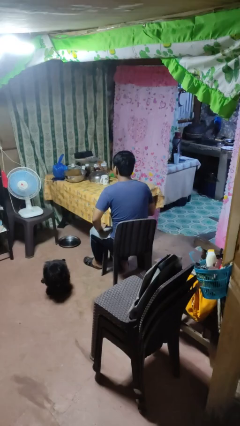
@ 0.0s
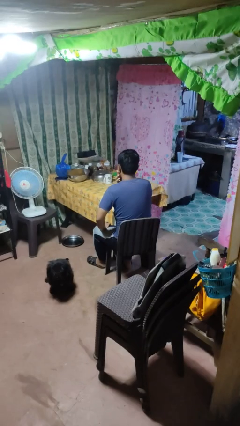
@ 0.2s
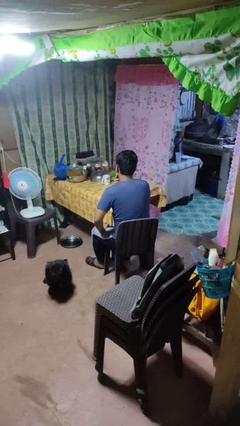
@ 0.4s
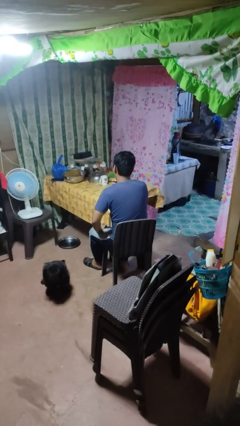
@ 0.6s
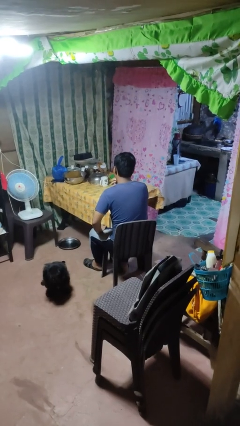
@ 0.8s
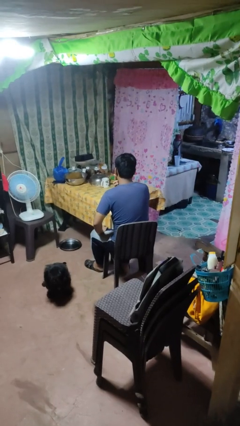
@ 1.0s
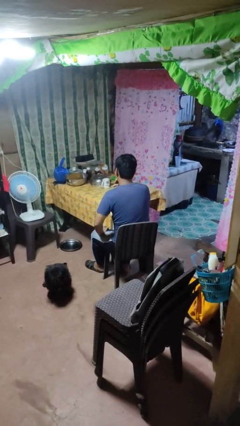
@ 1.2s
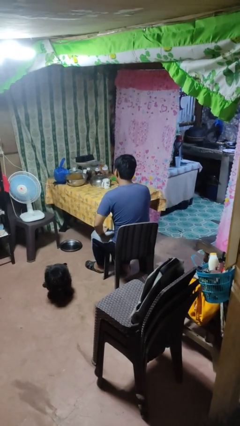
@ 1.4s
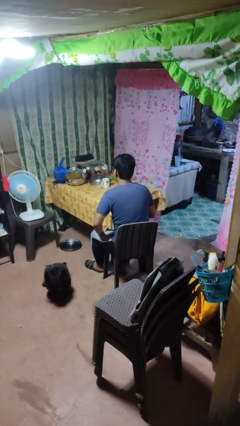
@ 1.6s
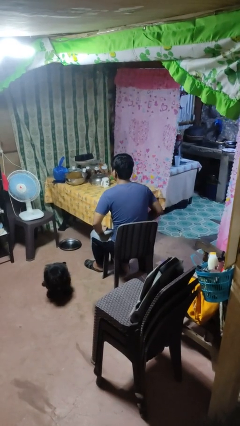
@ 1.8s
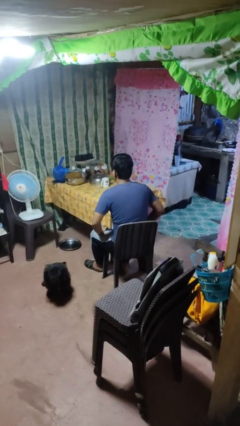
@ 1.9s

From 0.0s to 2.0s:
person strokes chin

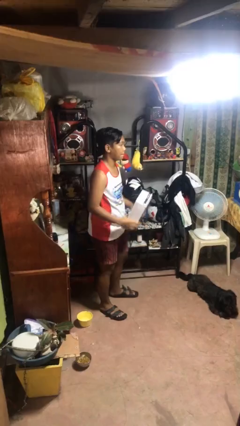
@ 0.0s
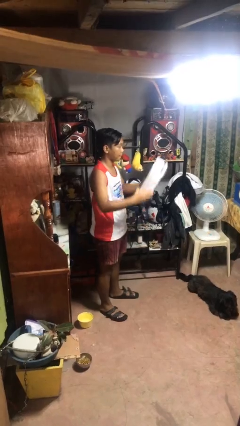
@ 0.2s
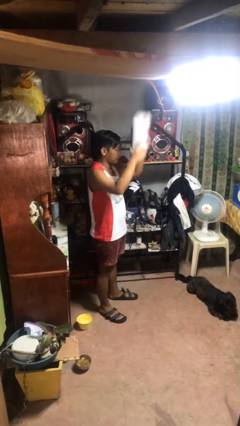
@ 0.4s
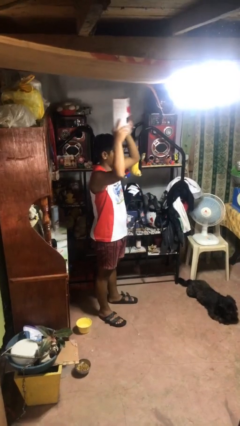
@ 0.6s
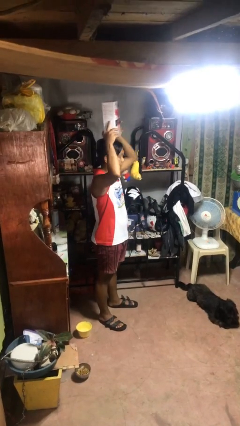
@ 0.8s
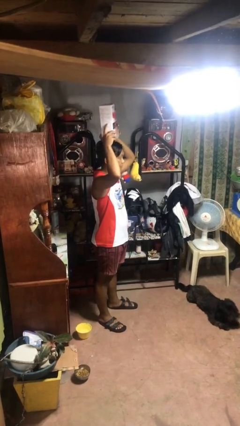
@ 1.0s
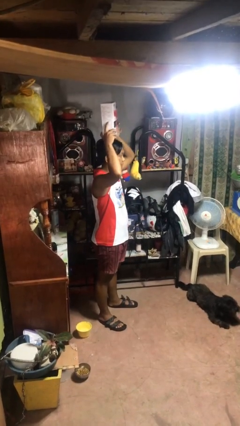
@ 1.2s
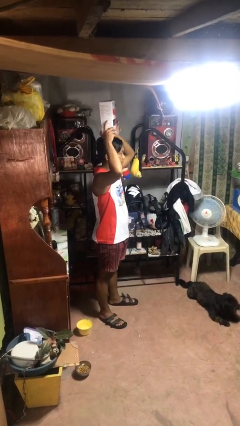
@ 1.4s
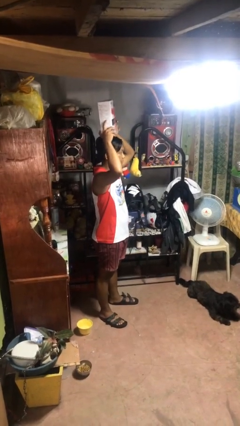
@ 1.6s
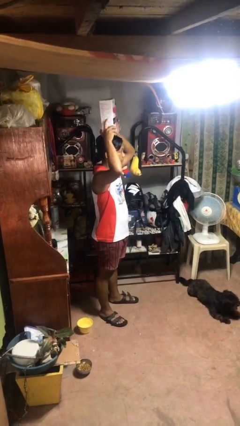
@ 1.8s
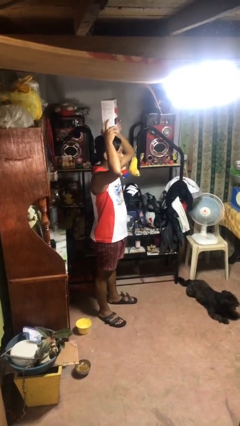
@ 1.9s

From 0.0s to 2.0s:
person holds object above head

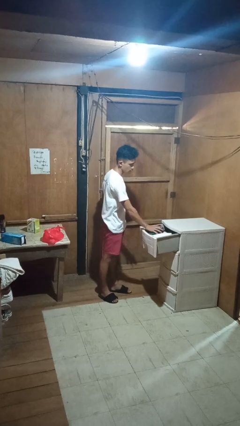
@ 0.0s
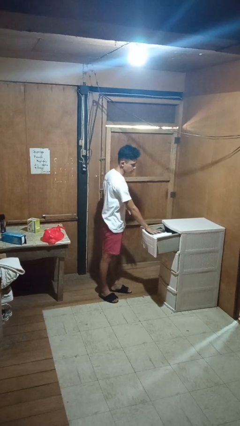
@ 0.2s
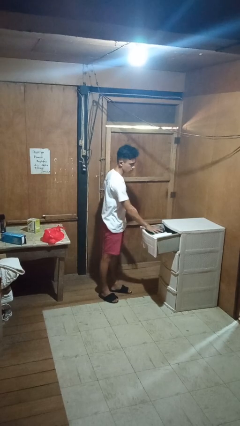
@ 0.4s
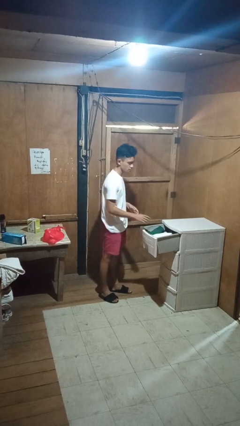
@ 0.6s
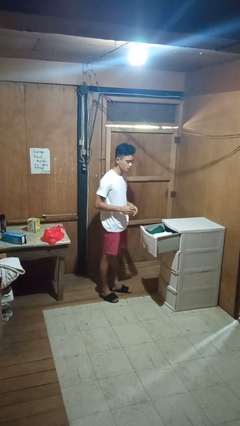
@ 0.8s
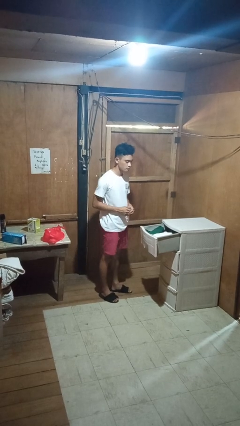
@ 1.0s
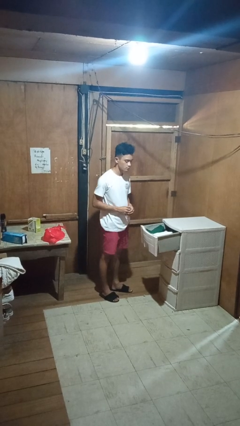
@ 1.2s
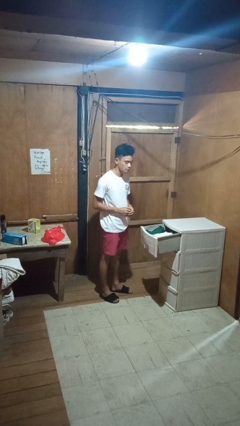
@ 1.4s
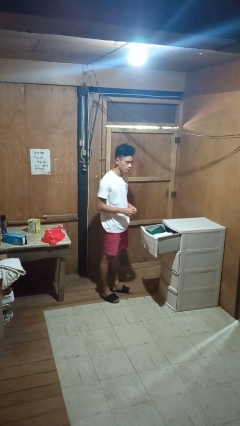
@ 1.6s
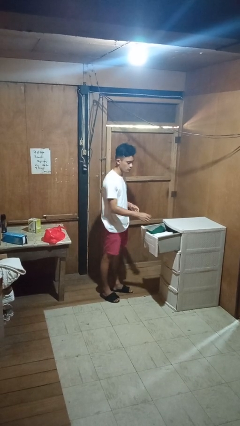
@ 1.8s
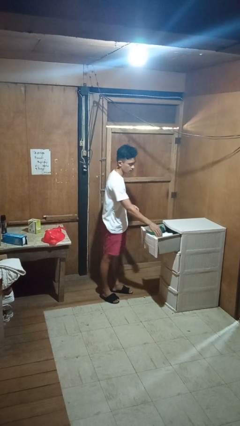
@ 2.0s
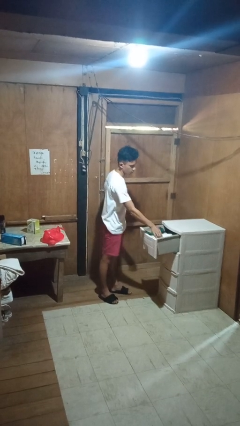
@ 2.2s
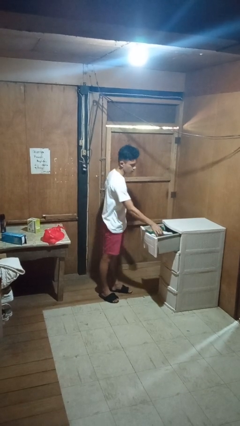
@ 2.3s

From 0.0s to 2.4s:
person puts clothes into dresser

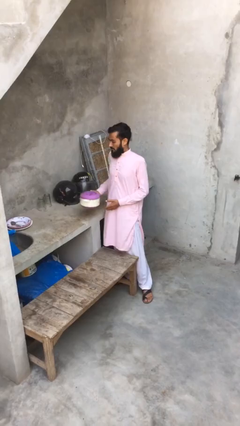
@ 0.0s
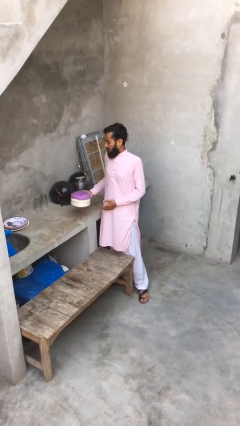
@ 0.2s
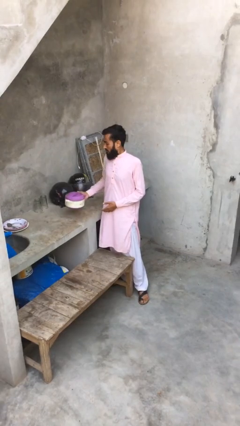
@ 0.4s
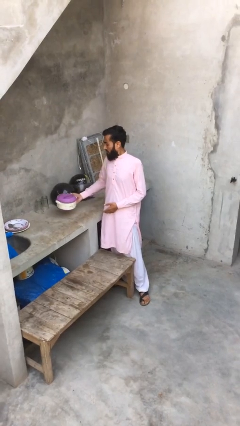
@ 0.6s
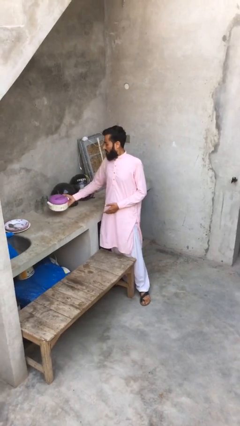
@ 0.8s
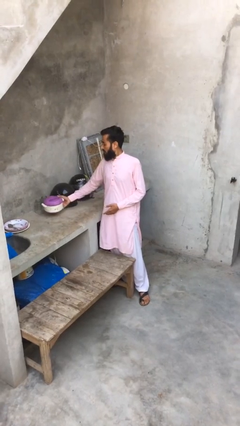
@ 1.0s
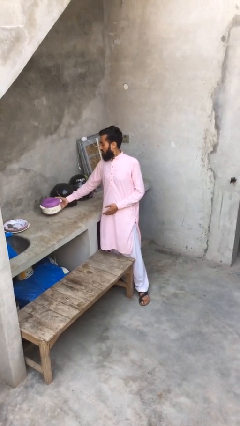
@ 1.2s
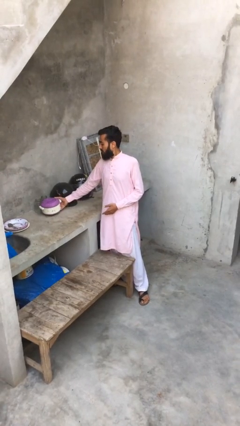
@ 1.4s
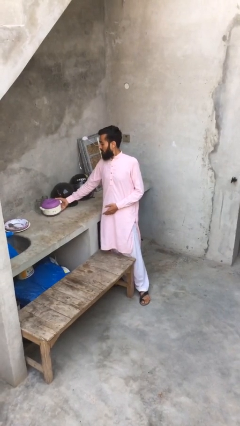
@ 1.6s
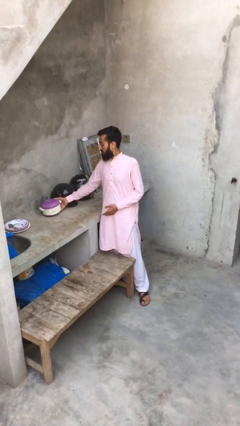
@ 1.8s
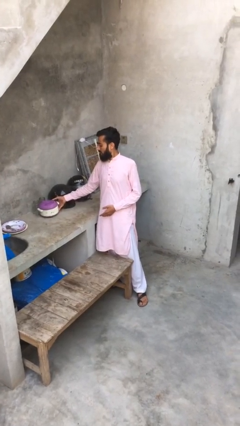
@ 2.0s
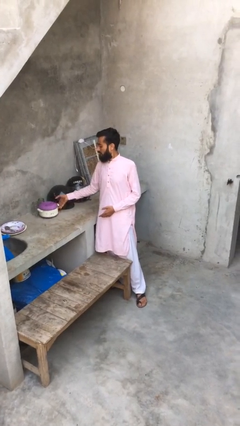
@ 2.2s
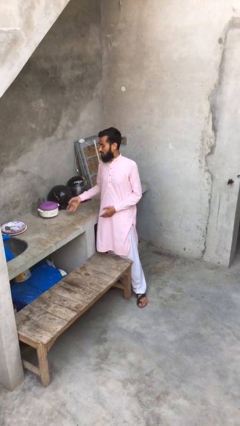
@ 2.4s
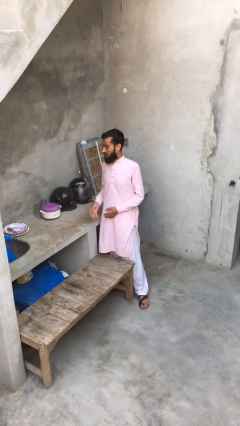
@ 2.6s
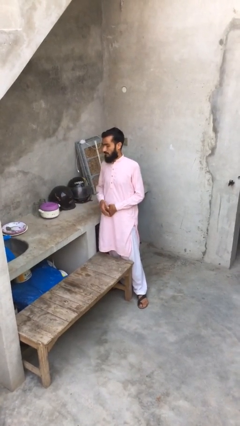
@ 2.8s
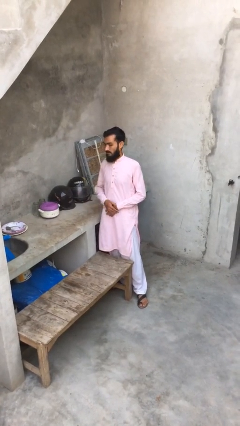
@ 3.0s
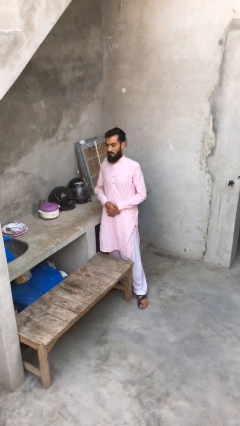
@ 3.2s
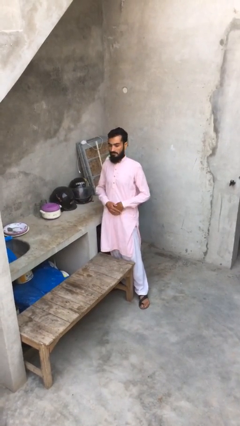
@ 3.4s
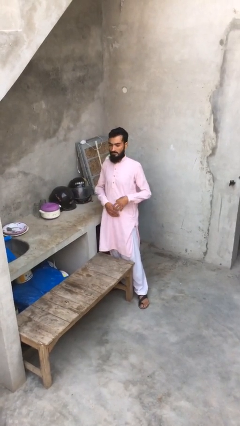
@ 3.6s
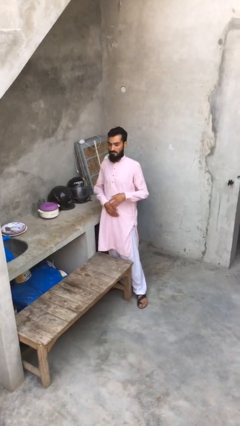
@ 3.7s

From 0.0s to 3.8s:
person puts down object on shelf

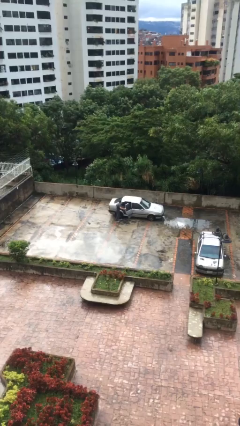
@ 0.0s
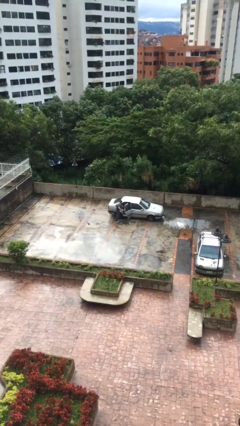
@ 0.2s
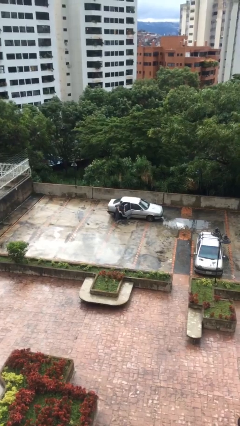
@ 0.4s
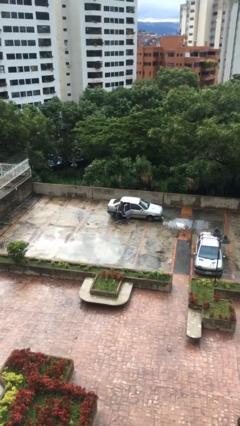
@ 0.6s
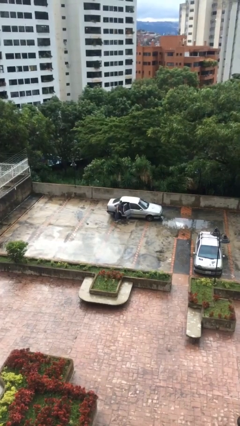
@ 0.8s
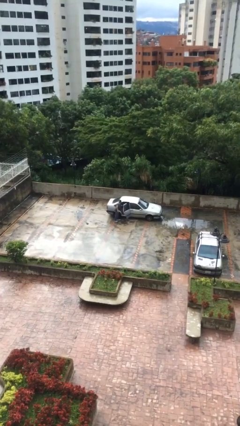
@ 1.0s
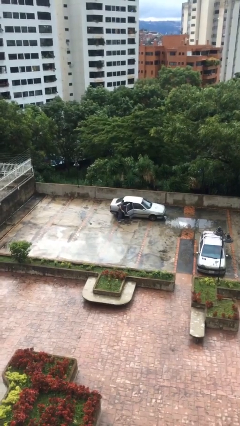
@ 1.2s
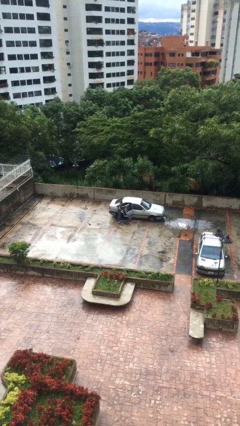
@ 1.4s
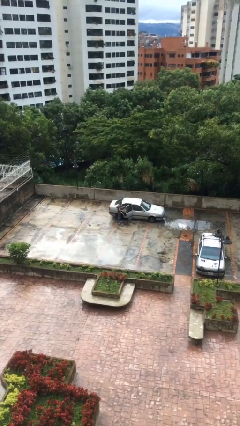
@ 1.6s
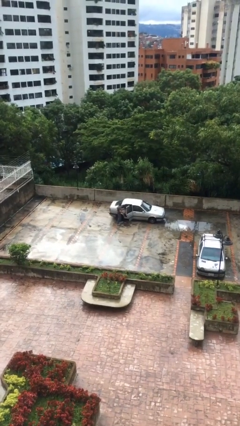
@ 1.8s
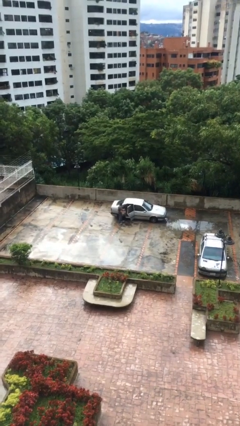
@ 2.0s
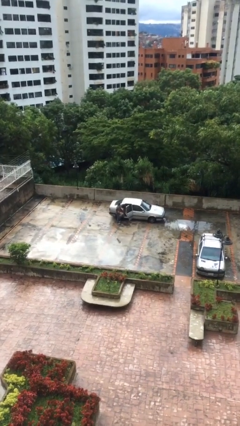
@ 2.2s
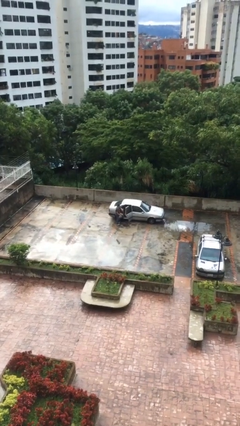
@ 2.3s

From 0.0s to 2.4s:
person unloads car

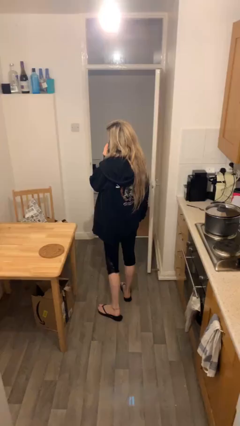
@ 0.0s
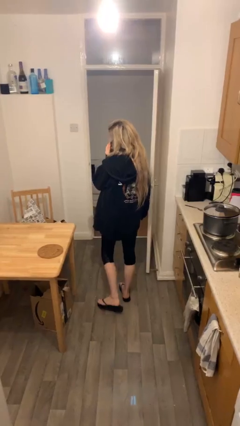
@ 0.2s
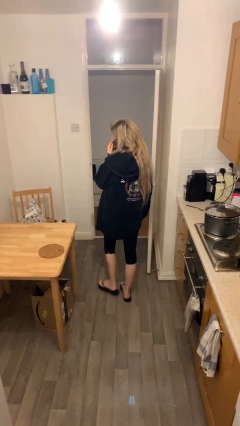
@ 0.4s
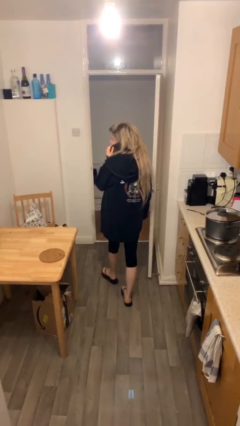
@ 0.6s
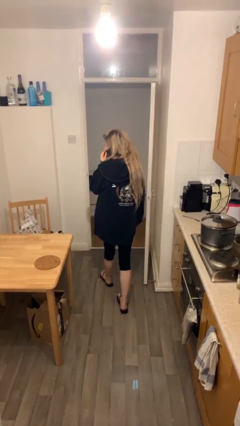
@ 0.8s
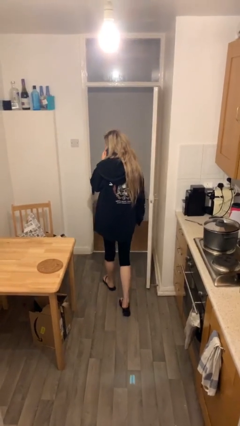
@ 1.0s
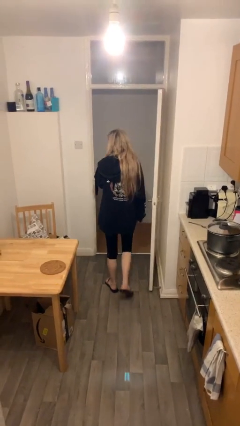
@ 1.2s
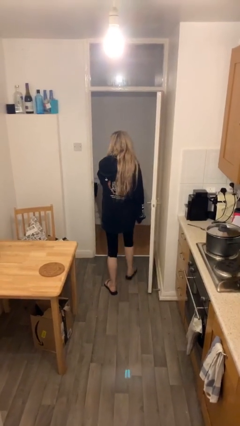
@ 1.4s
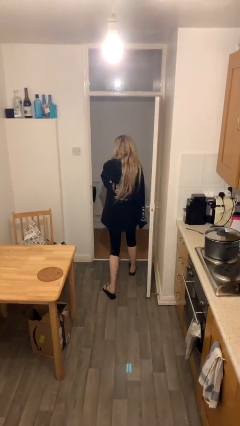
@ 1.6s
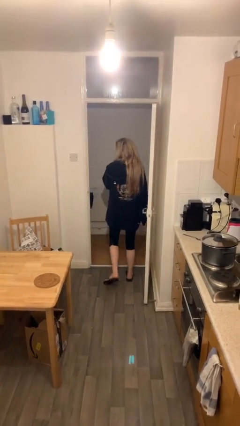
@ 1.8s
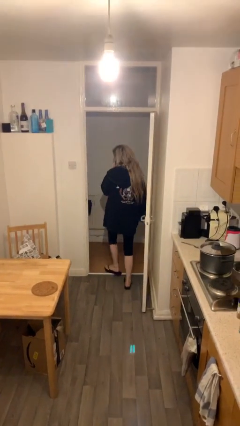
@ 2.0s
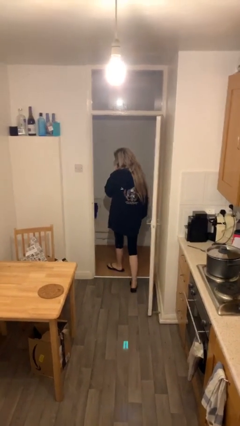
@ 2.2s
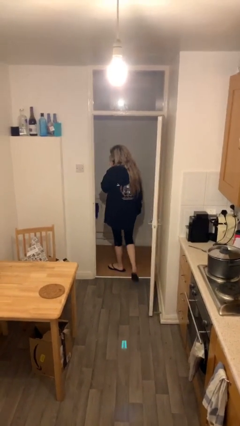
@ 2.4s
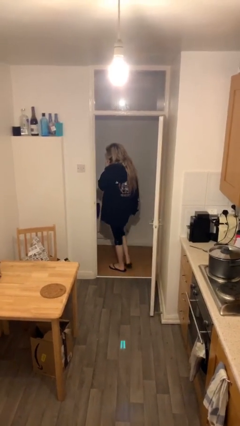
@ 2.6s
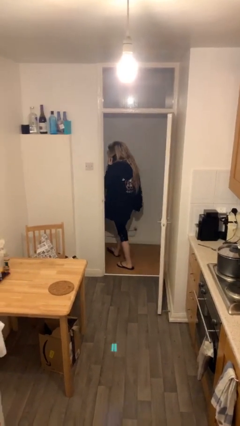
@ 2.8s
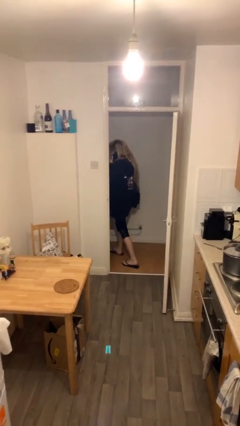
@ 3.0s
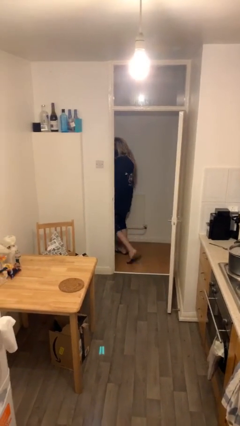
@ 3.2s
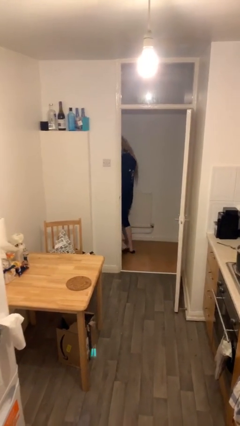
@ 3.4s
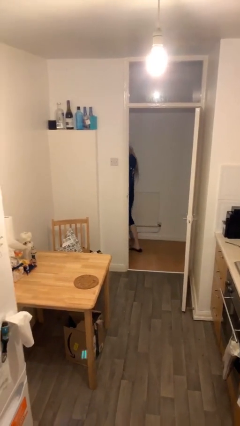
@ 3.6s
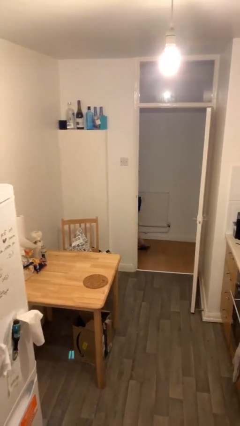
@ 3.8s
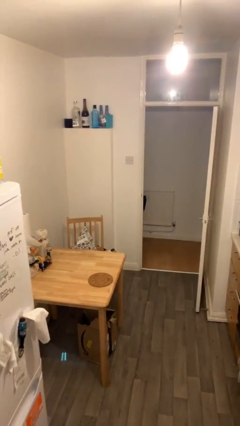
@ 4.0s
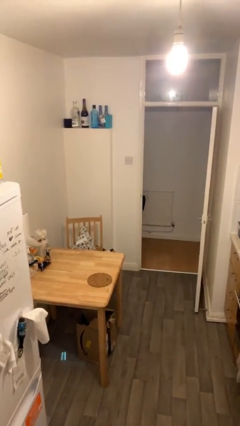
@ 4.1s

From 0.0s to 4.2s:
person exits scene through structure

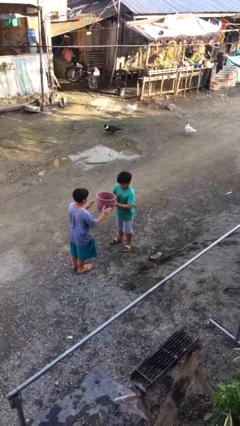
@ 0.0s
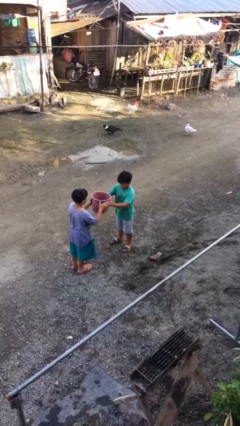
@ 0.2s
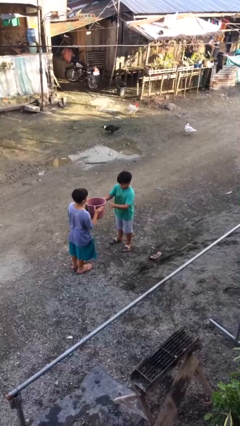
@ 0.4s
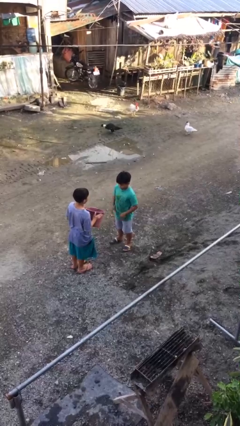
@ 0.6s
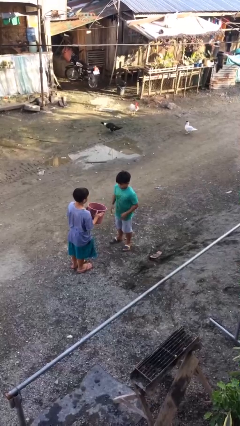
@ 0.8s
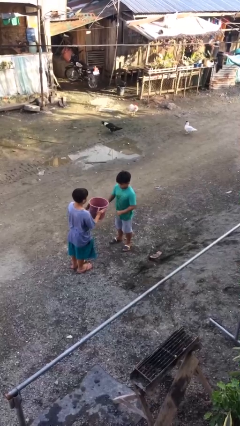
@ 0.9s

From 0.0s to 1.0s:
person transfers object to person
